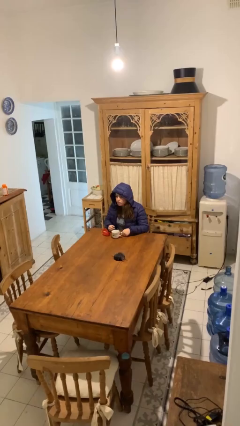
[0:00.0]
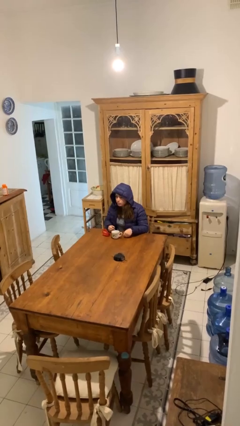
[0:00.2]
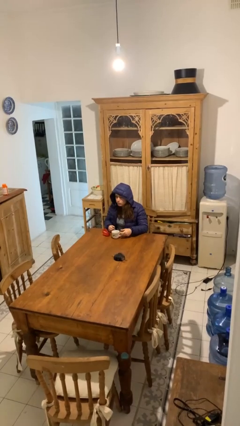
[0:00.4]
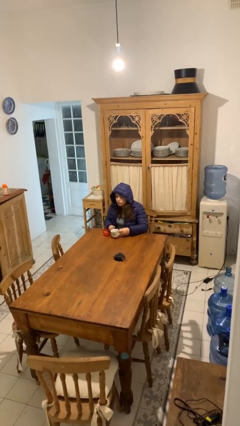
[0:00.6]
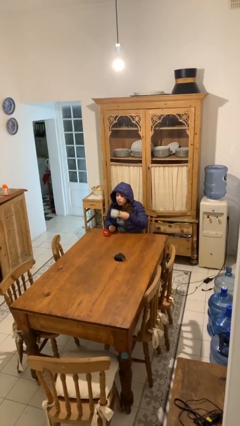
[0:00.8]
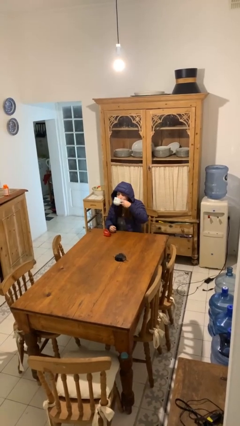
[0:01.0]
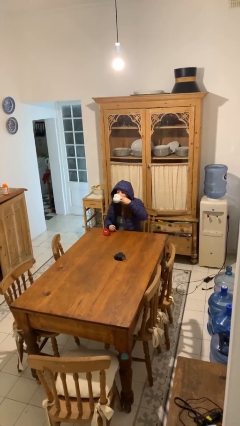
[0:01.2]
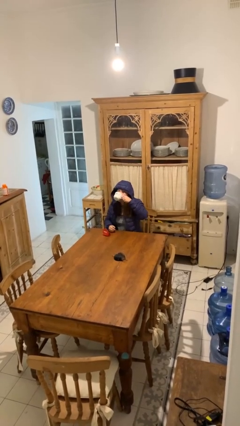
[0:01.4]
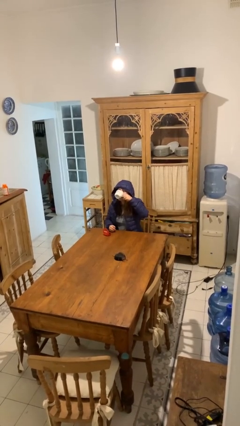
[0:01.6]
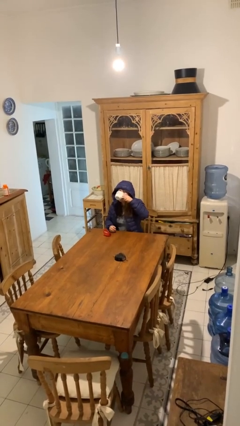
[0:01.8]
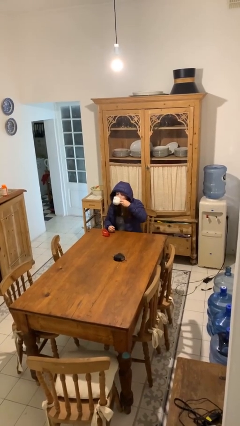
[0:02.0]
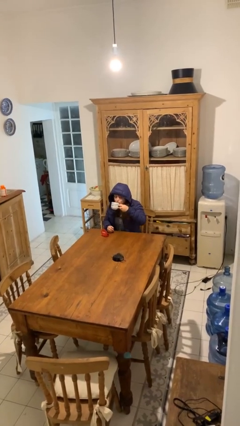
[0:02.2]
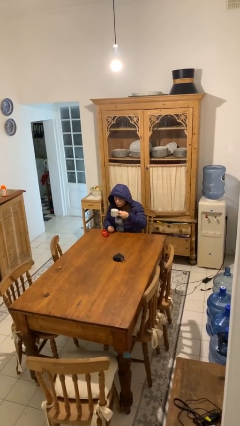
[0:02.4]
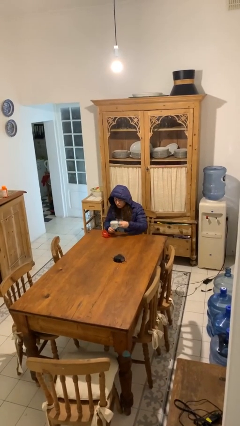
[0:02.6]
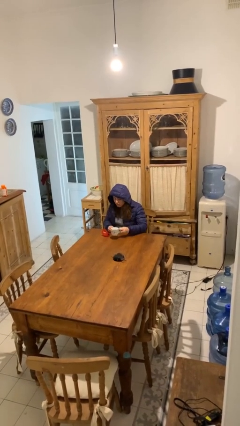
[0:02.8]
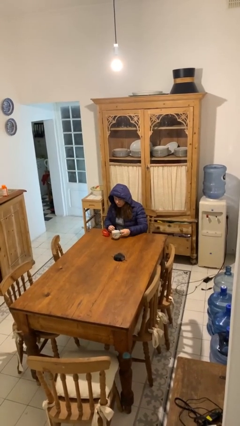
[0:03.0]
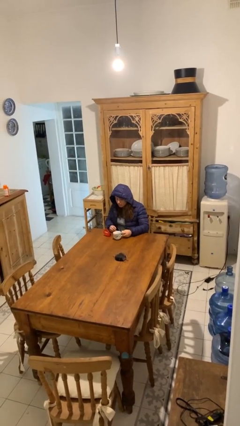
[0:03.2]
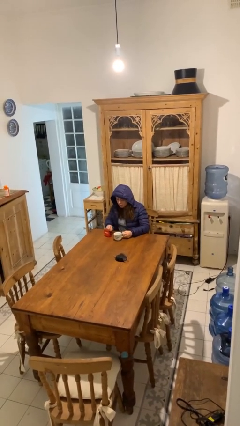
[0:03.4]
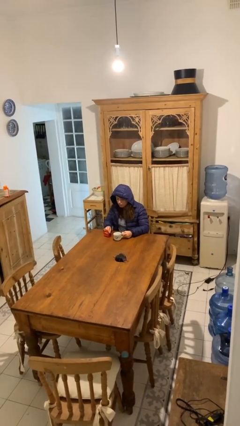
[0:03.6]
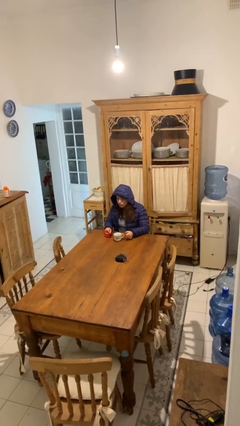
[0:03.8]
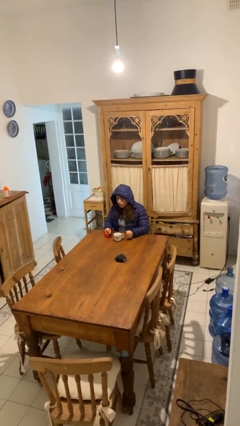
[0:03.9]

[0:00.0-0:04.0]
person drinks from cup

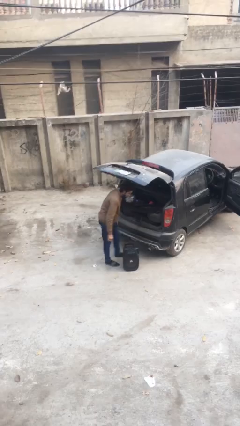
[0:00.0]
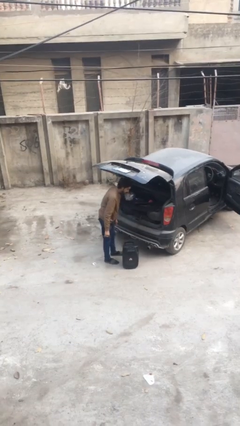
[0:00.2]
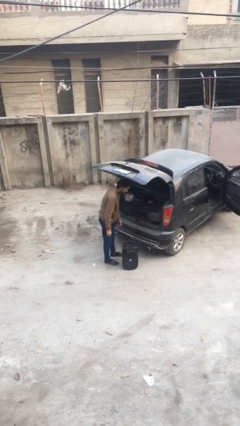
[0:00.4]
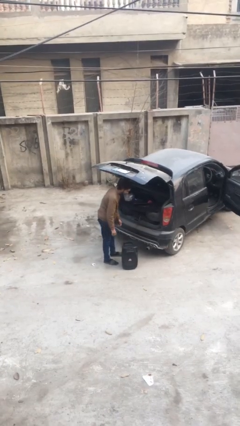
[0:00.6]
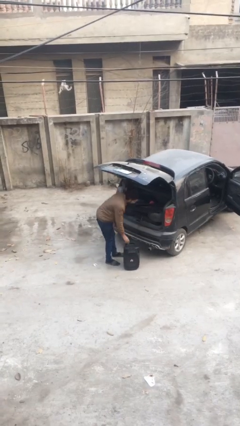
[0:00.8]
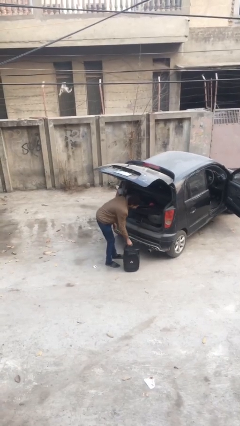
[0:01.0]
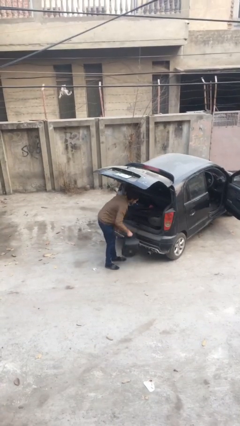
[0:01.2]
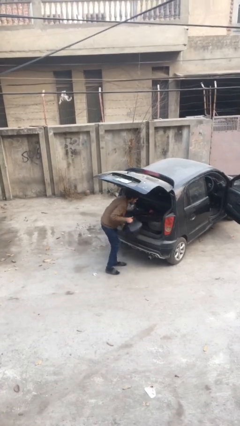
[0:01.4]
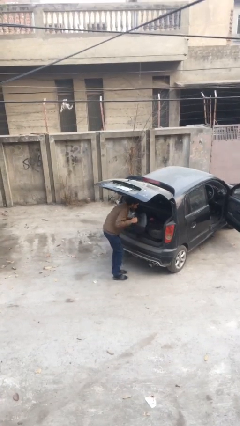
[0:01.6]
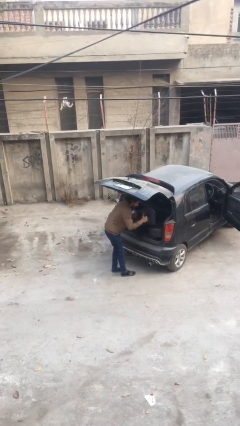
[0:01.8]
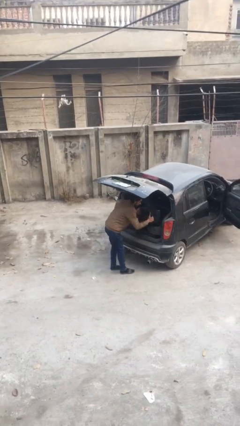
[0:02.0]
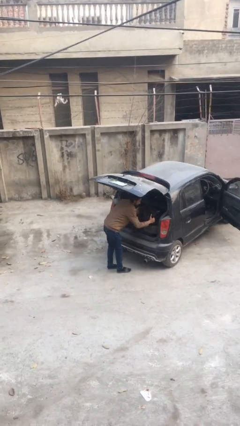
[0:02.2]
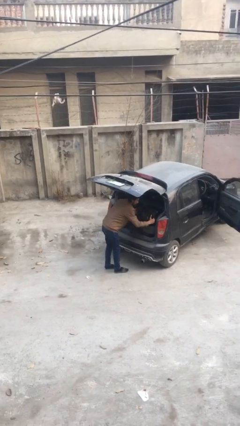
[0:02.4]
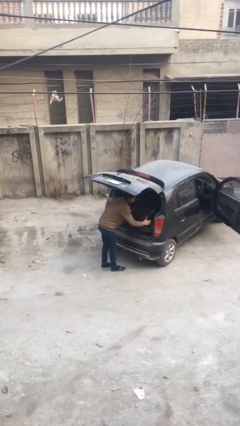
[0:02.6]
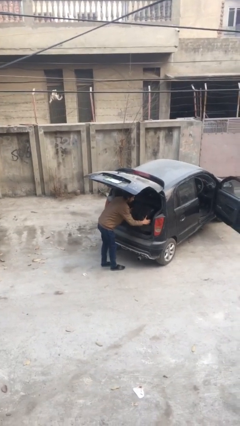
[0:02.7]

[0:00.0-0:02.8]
person loads car

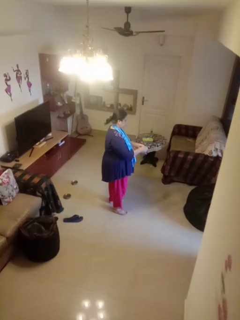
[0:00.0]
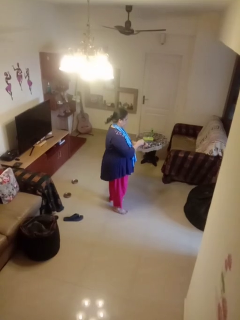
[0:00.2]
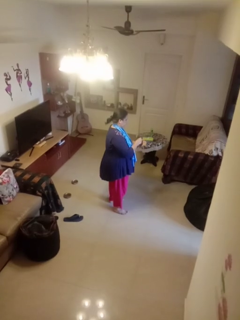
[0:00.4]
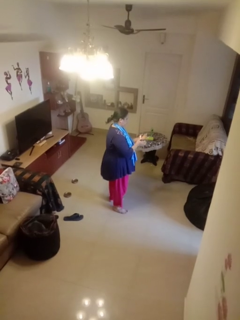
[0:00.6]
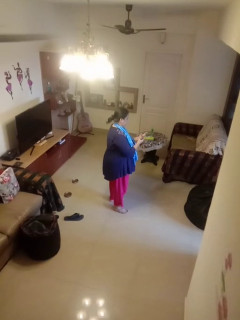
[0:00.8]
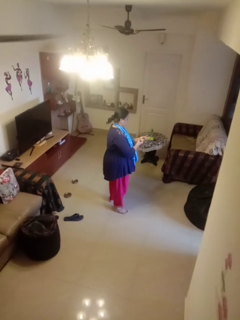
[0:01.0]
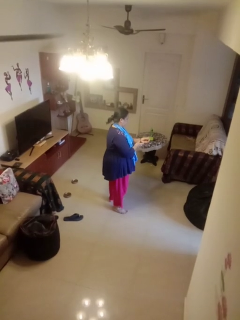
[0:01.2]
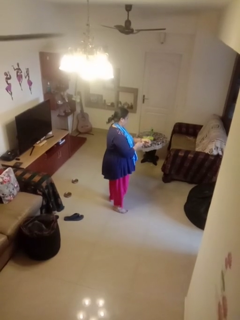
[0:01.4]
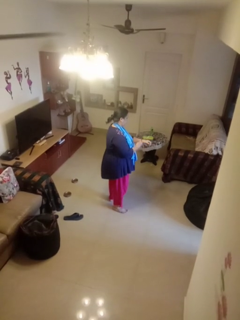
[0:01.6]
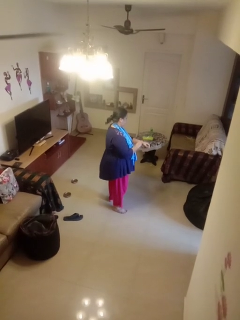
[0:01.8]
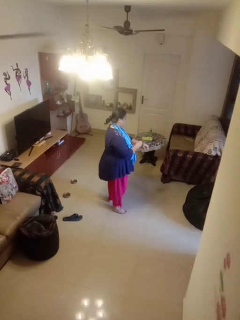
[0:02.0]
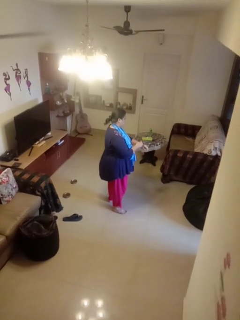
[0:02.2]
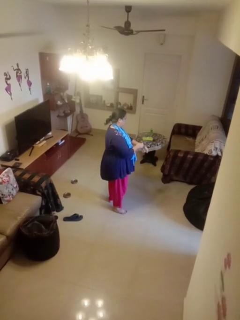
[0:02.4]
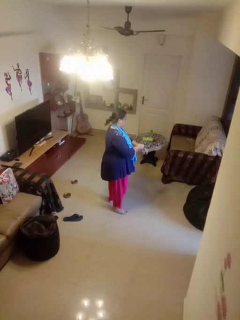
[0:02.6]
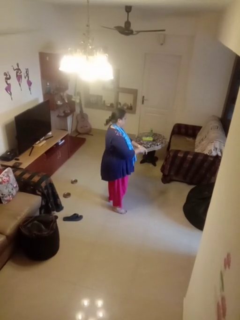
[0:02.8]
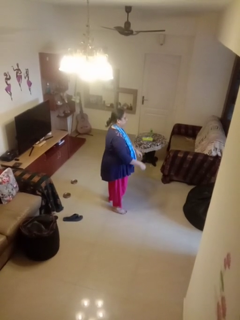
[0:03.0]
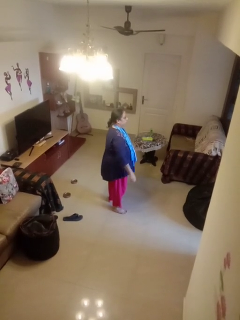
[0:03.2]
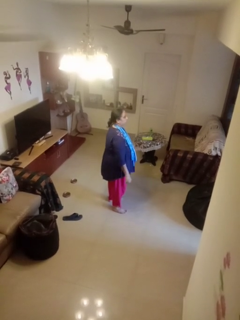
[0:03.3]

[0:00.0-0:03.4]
person puts on wristwatch

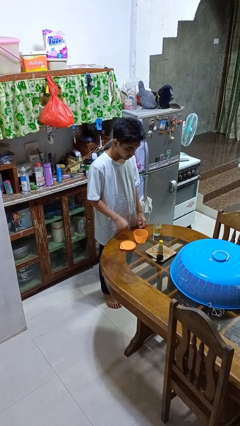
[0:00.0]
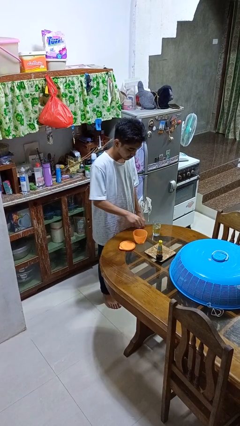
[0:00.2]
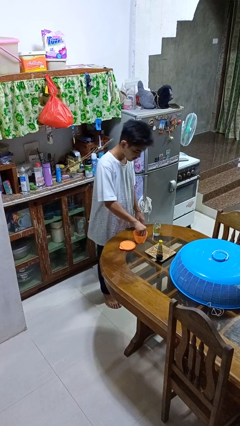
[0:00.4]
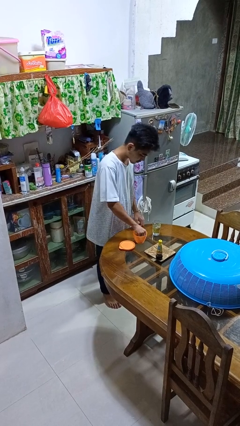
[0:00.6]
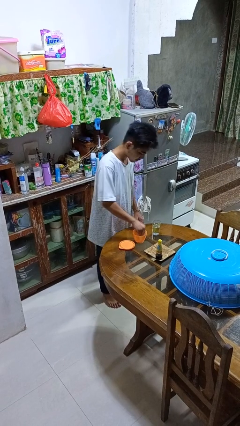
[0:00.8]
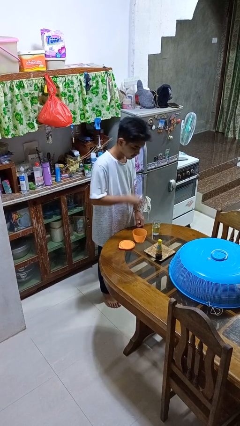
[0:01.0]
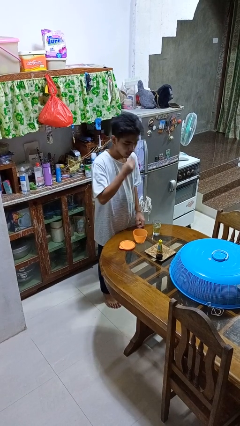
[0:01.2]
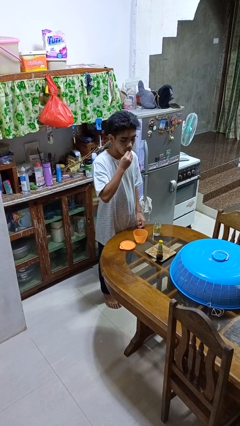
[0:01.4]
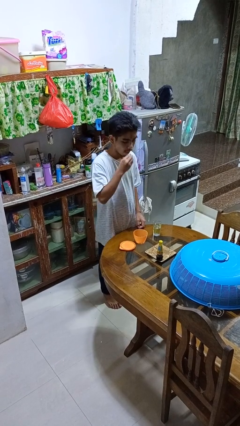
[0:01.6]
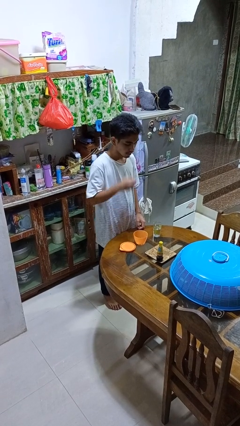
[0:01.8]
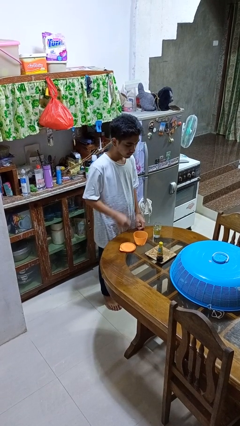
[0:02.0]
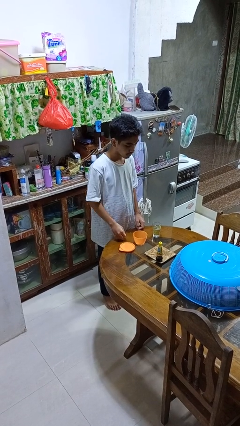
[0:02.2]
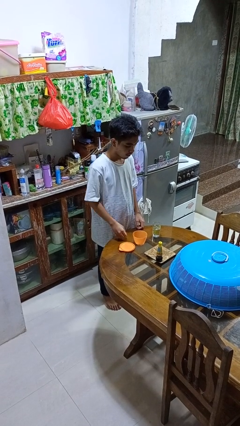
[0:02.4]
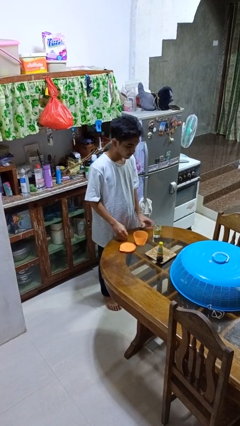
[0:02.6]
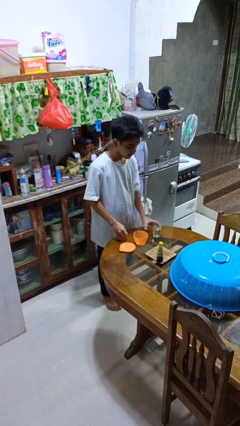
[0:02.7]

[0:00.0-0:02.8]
person takes medicine pills

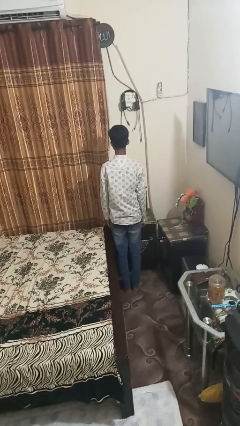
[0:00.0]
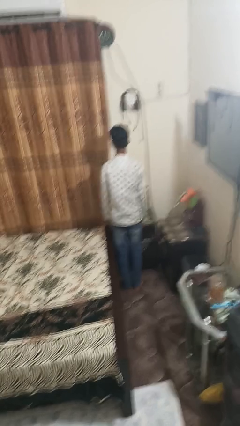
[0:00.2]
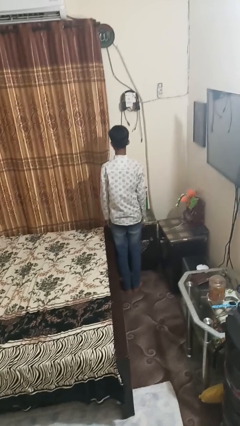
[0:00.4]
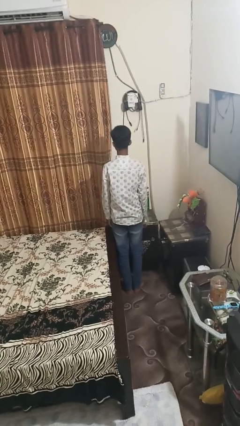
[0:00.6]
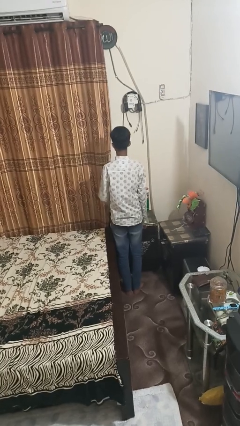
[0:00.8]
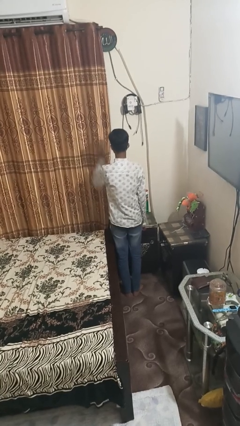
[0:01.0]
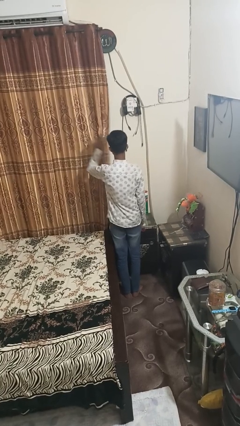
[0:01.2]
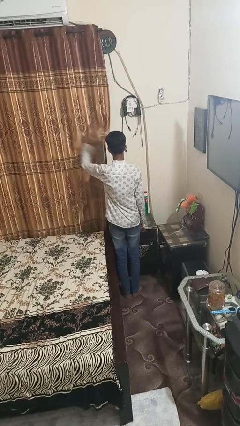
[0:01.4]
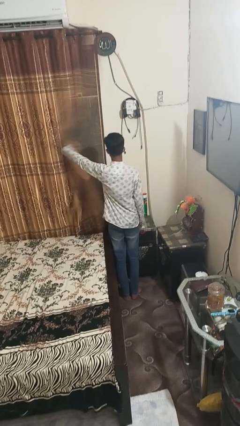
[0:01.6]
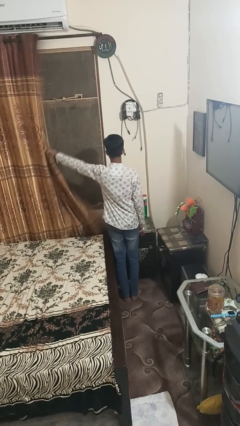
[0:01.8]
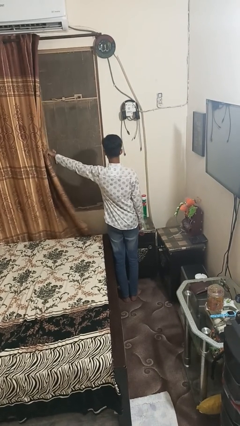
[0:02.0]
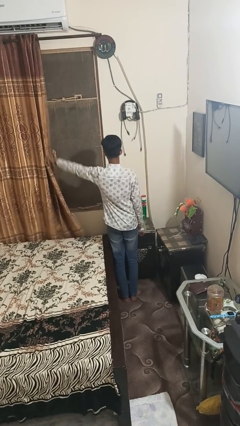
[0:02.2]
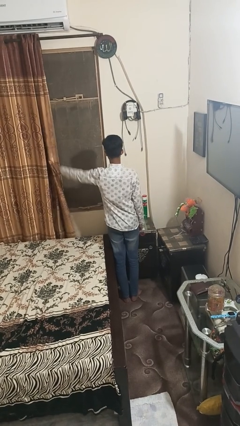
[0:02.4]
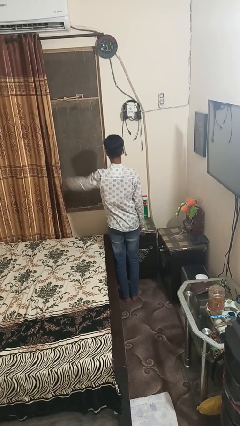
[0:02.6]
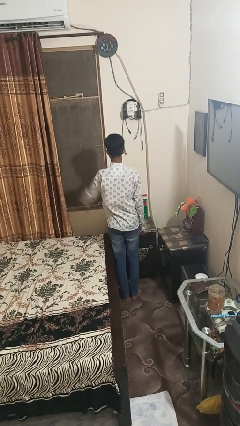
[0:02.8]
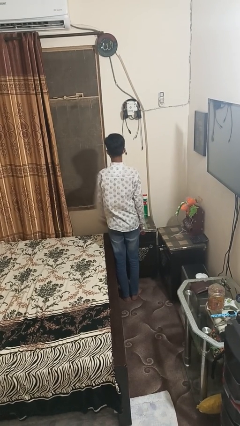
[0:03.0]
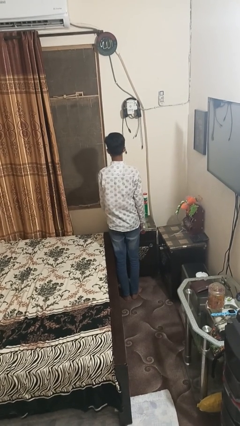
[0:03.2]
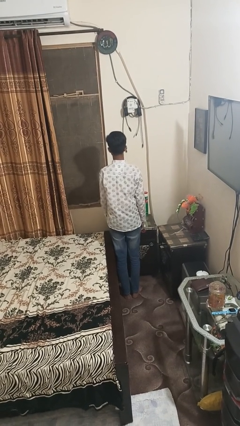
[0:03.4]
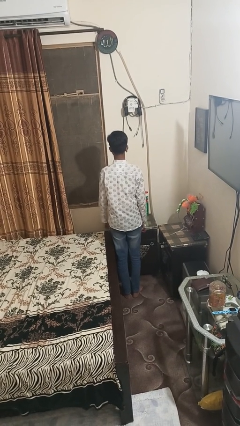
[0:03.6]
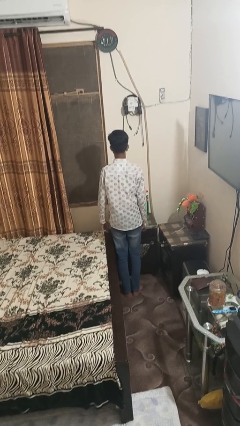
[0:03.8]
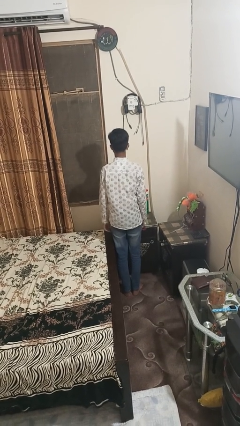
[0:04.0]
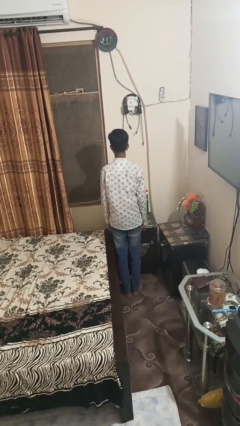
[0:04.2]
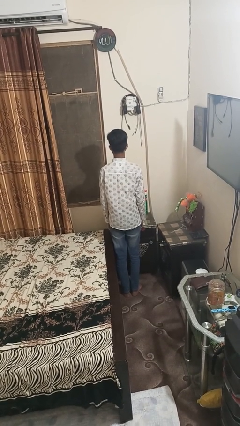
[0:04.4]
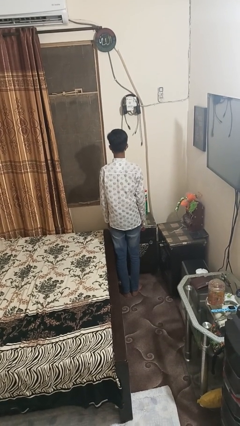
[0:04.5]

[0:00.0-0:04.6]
person opens curtains

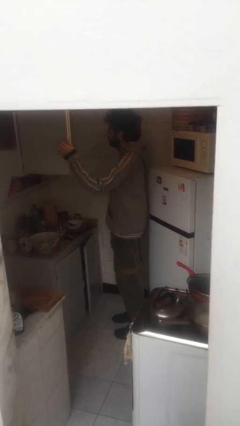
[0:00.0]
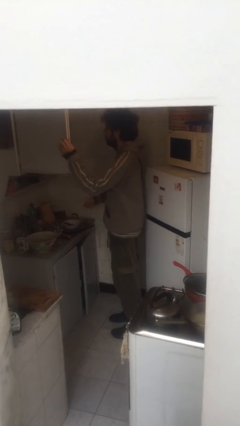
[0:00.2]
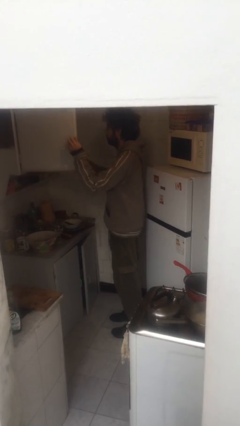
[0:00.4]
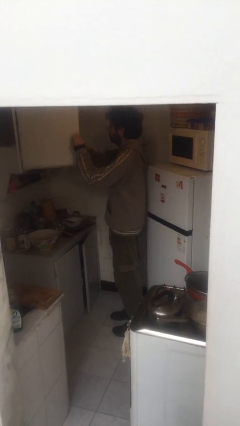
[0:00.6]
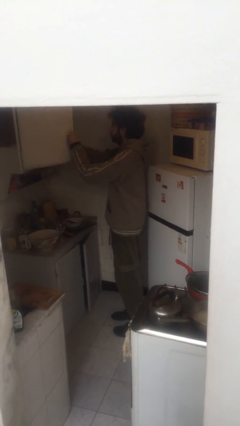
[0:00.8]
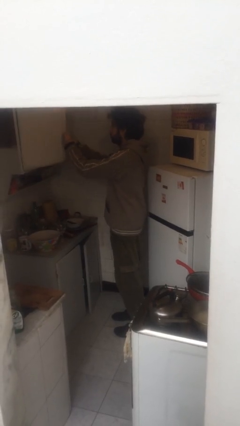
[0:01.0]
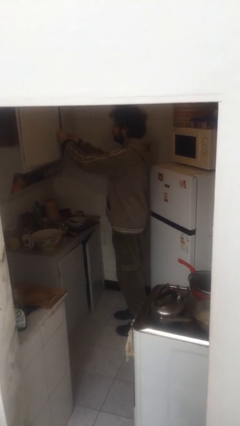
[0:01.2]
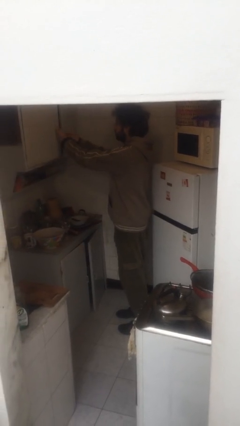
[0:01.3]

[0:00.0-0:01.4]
person closes cabinet
